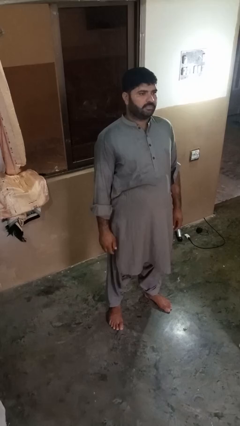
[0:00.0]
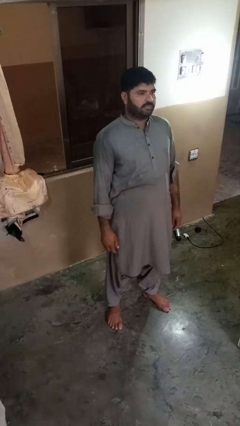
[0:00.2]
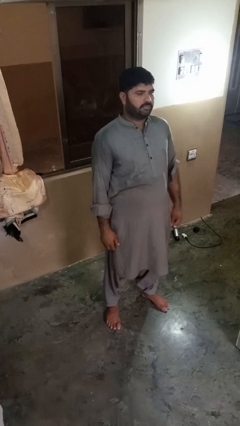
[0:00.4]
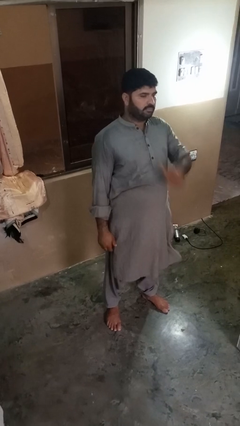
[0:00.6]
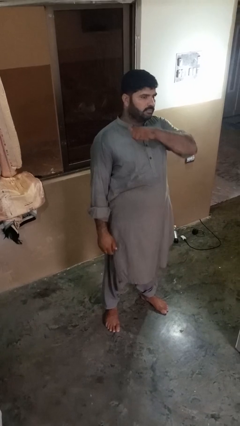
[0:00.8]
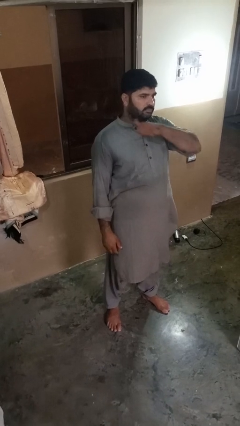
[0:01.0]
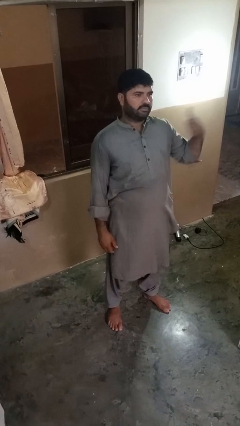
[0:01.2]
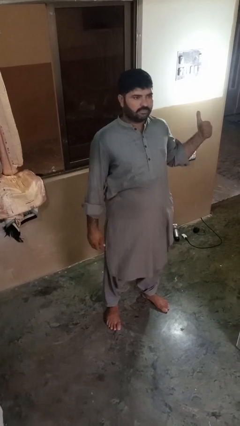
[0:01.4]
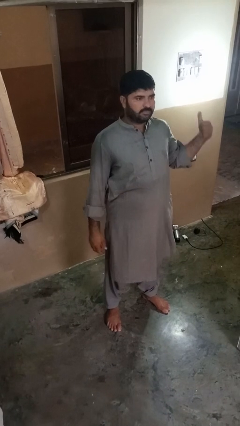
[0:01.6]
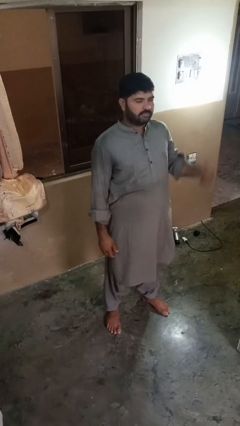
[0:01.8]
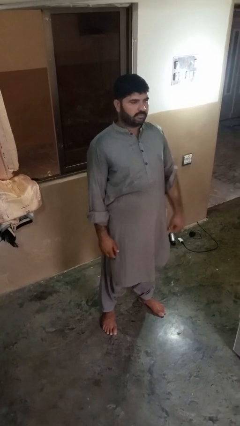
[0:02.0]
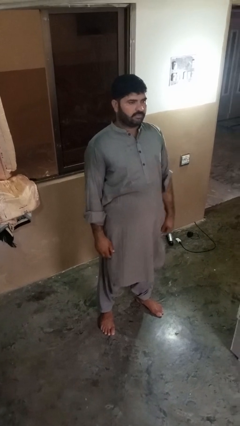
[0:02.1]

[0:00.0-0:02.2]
person gestures cut

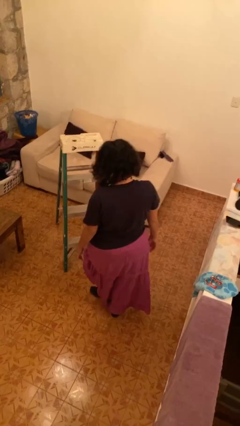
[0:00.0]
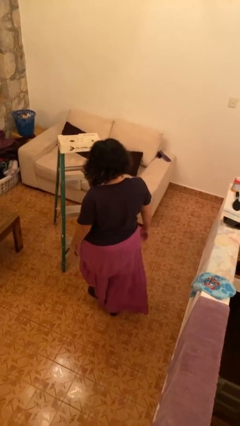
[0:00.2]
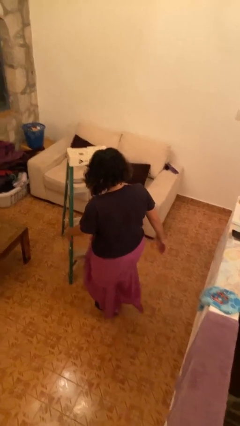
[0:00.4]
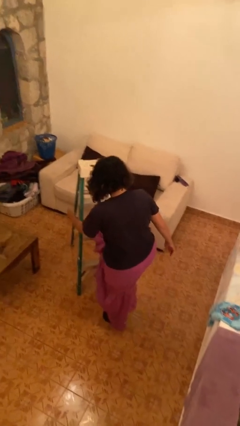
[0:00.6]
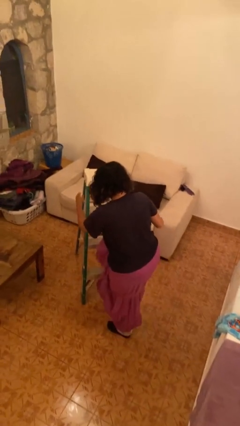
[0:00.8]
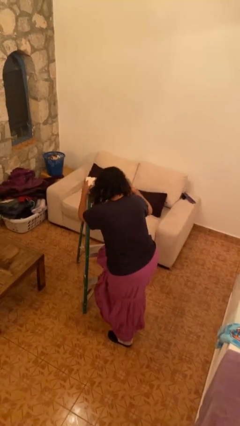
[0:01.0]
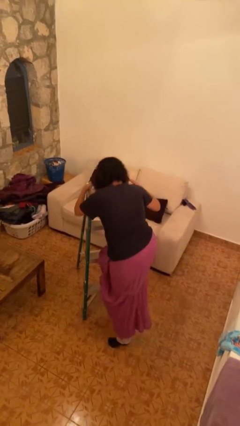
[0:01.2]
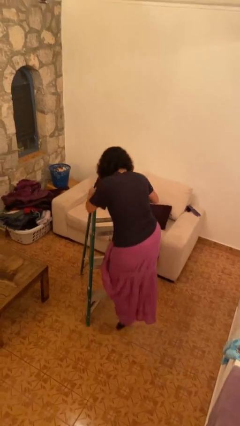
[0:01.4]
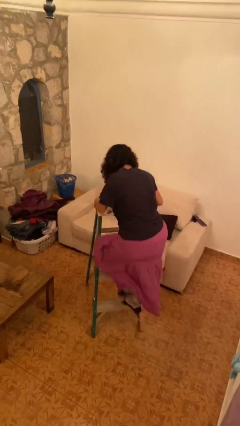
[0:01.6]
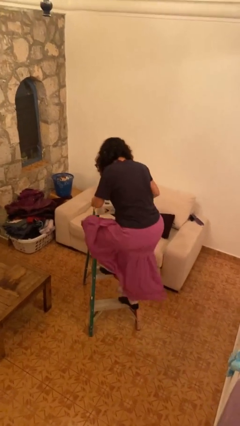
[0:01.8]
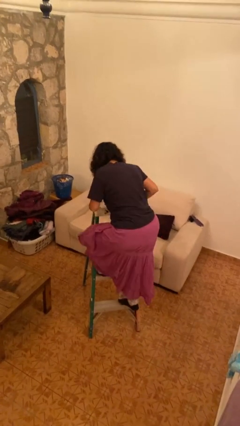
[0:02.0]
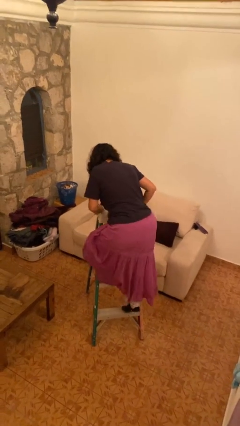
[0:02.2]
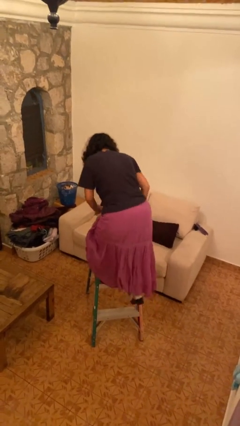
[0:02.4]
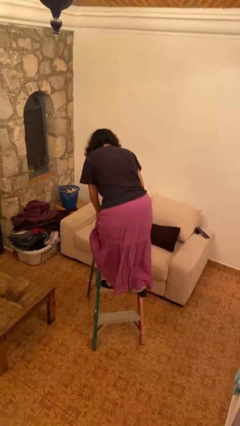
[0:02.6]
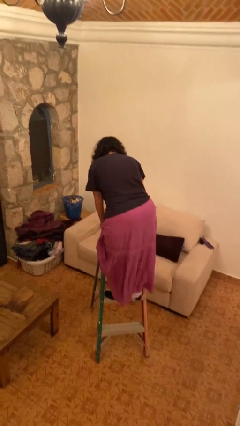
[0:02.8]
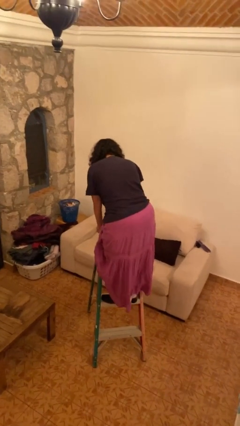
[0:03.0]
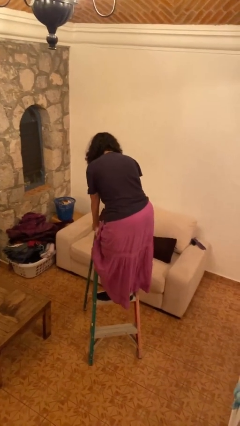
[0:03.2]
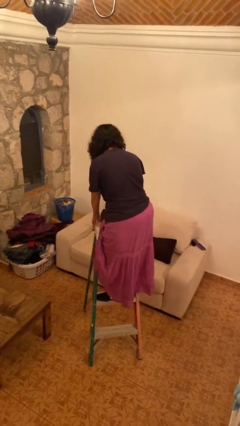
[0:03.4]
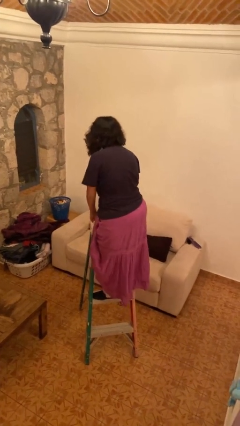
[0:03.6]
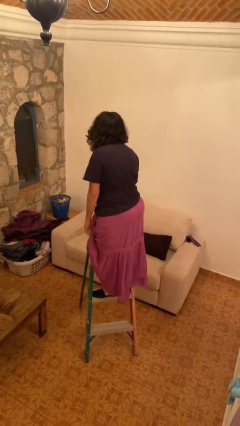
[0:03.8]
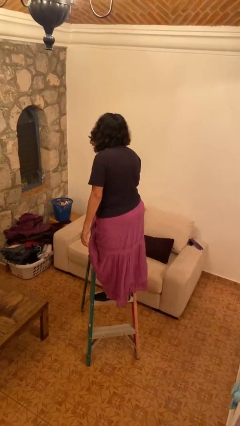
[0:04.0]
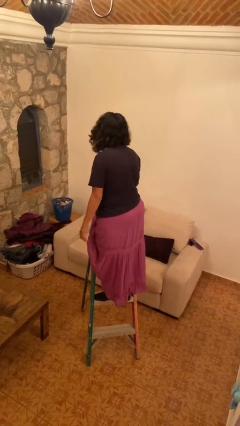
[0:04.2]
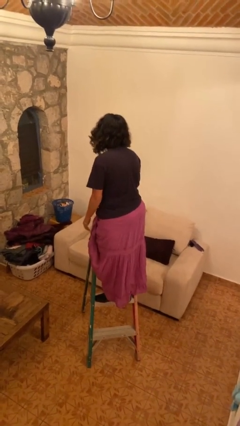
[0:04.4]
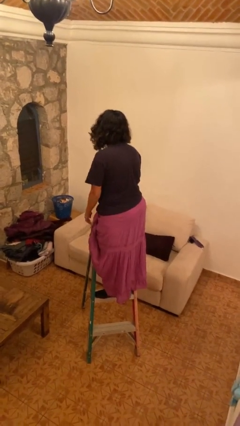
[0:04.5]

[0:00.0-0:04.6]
person climbs up ladder

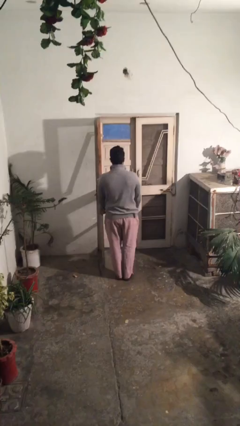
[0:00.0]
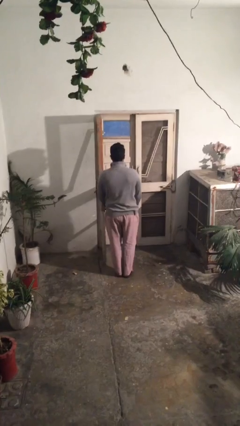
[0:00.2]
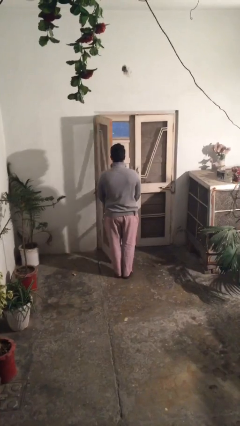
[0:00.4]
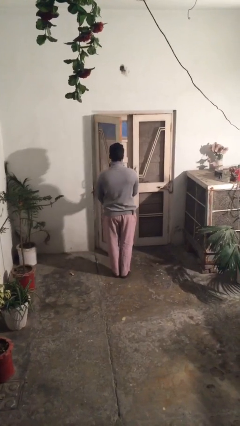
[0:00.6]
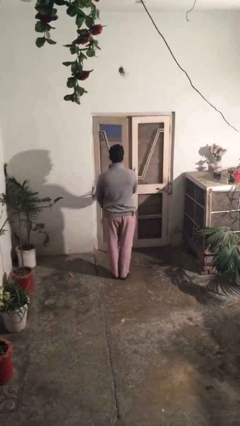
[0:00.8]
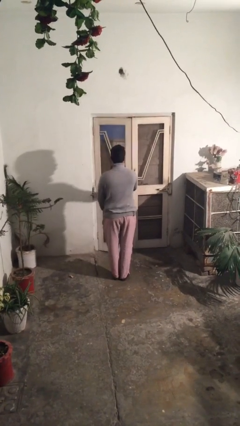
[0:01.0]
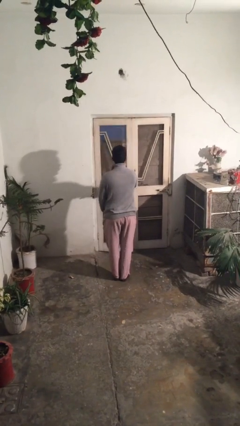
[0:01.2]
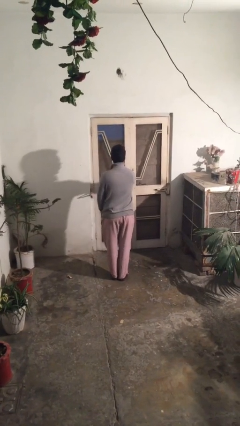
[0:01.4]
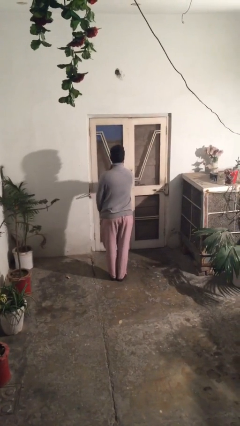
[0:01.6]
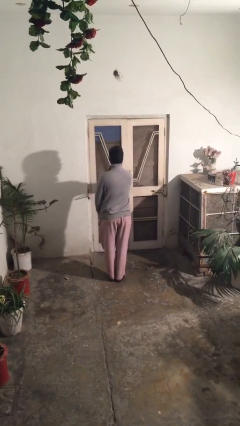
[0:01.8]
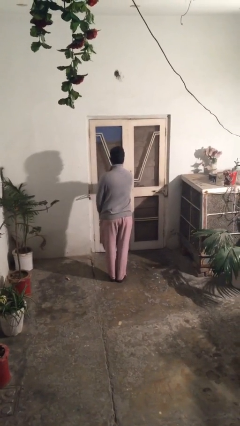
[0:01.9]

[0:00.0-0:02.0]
person closes facility door

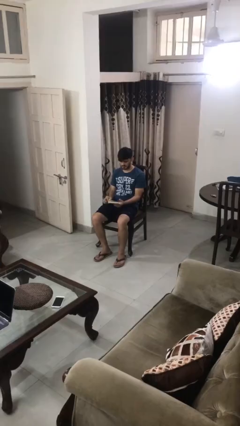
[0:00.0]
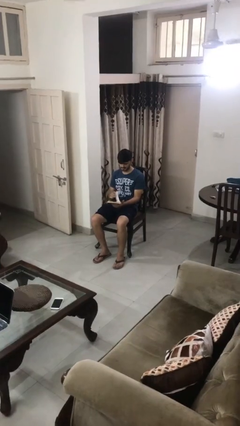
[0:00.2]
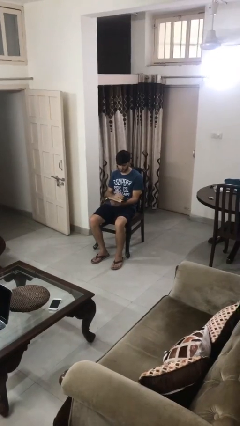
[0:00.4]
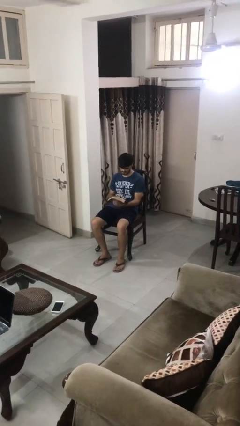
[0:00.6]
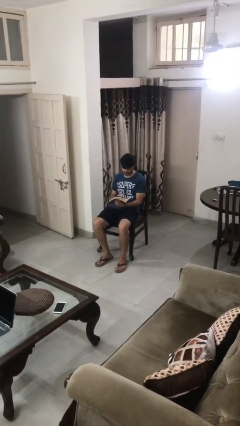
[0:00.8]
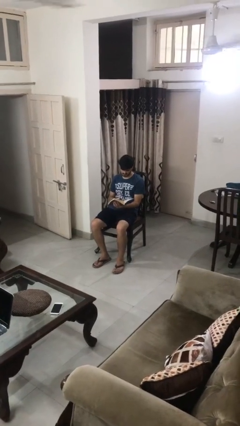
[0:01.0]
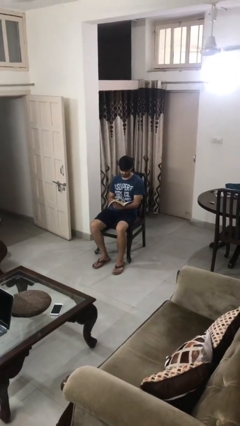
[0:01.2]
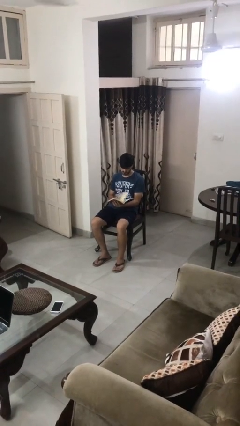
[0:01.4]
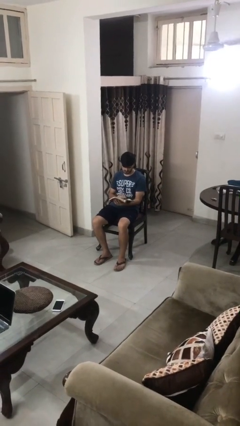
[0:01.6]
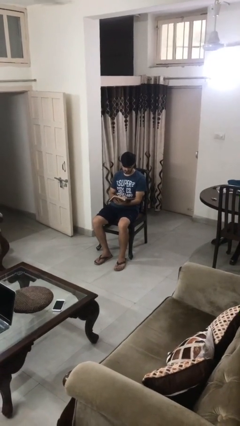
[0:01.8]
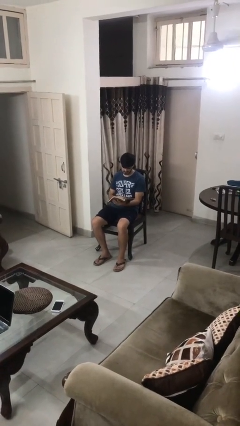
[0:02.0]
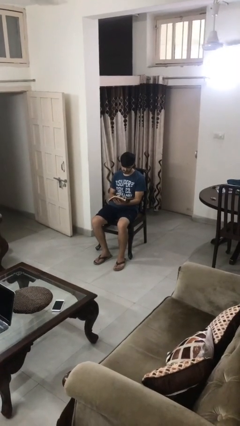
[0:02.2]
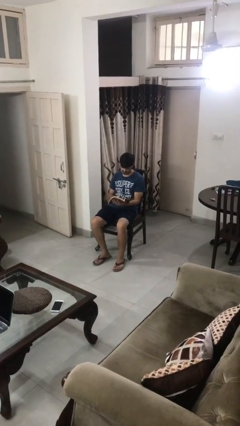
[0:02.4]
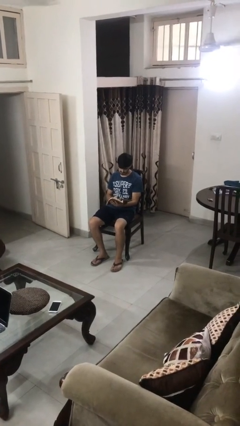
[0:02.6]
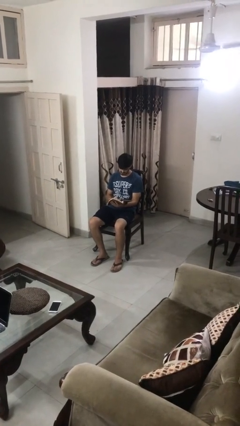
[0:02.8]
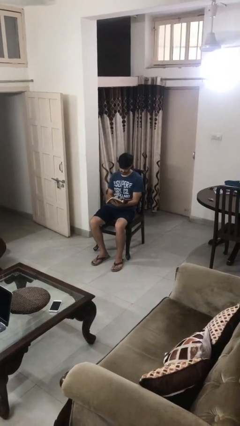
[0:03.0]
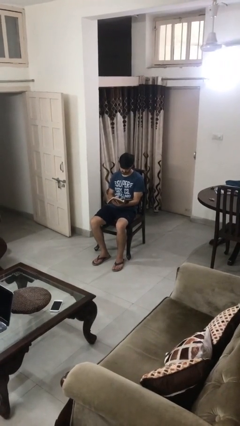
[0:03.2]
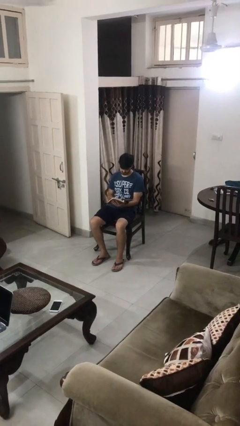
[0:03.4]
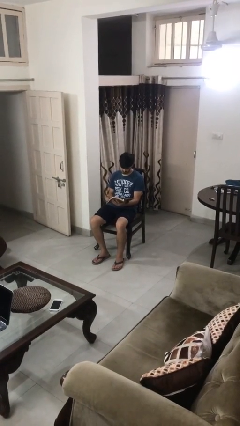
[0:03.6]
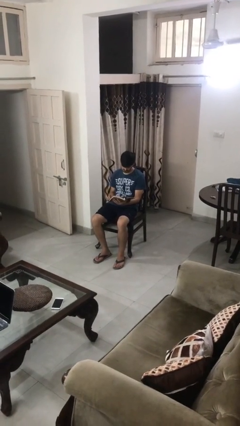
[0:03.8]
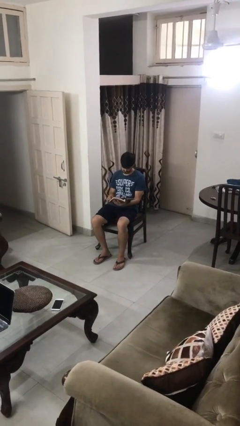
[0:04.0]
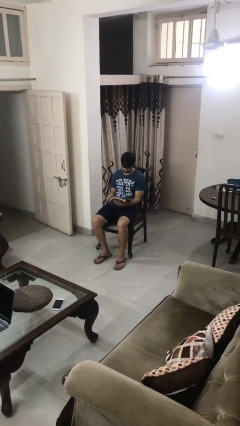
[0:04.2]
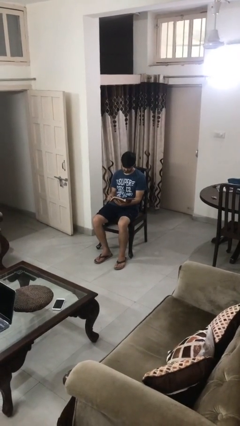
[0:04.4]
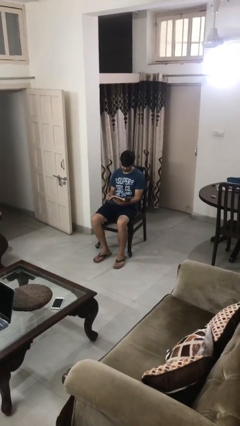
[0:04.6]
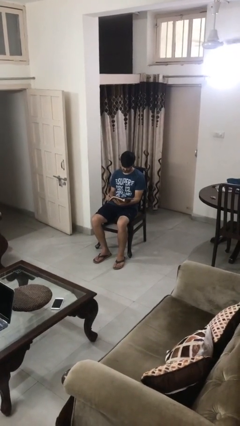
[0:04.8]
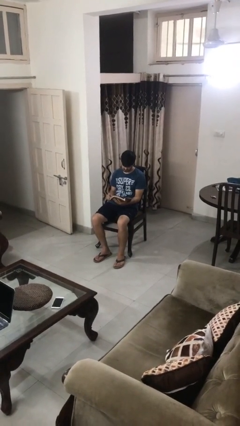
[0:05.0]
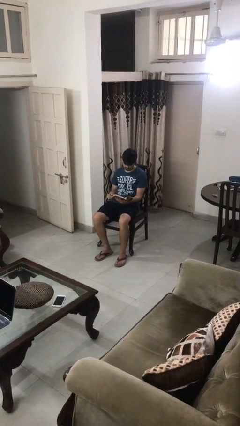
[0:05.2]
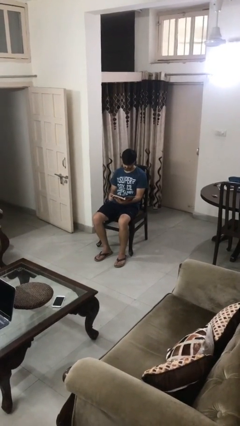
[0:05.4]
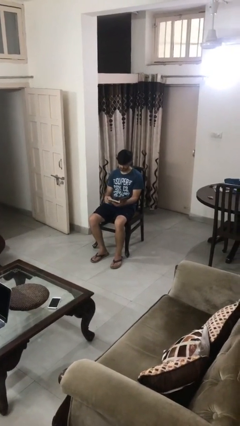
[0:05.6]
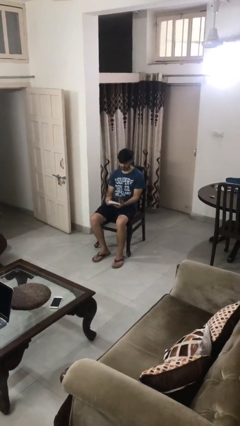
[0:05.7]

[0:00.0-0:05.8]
person reads book

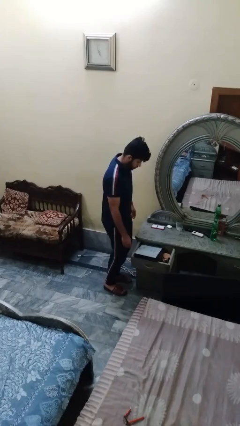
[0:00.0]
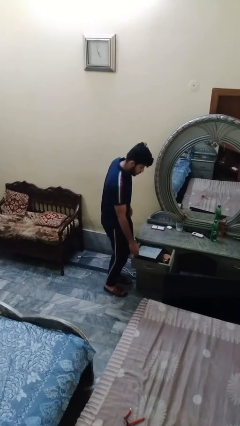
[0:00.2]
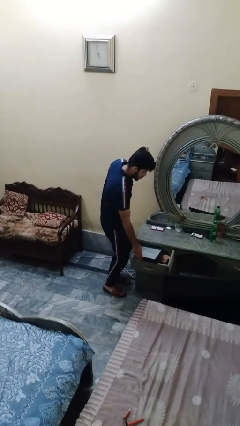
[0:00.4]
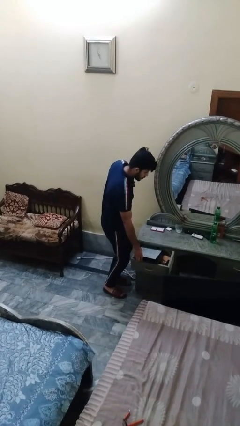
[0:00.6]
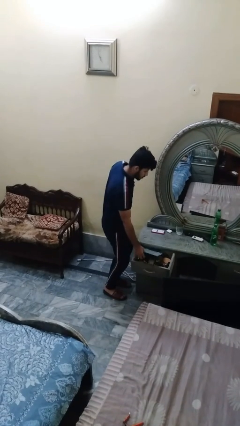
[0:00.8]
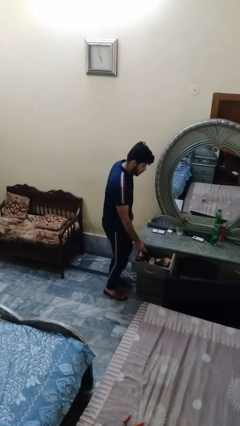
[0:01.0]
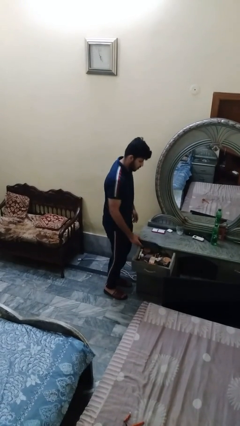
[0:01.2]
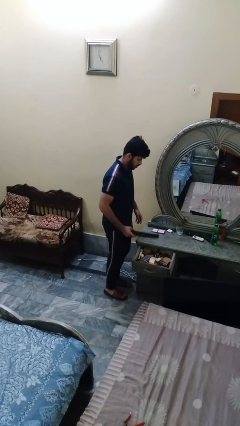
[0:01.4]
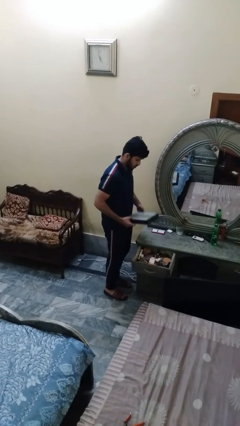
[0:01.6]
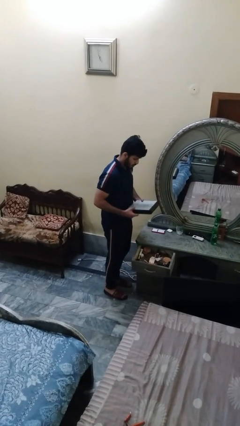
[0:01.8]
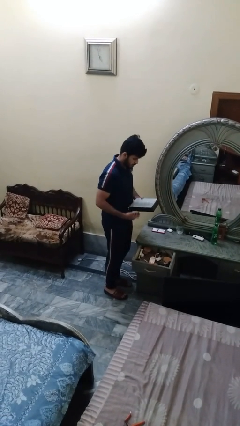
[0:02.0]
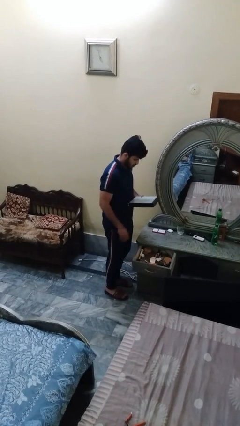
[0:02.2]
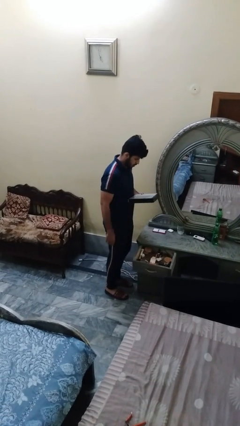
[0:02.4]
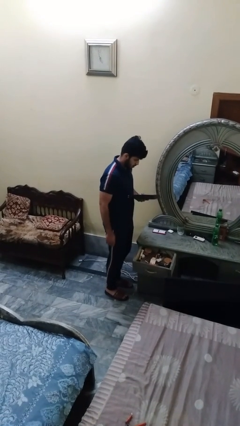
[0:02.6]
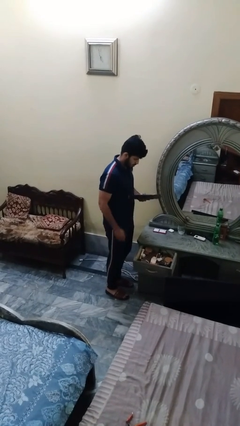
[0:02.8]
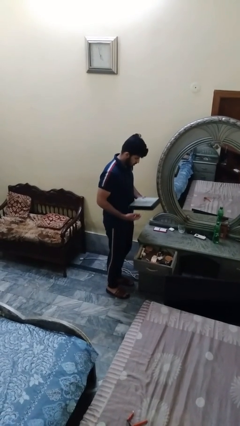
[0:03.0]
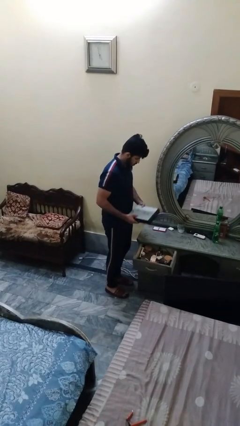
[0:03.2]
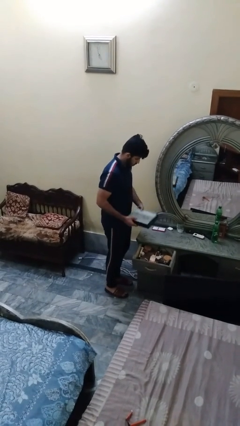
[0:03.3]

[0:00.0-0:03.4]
person picks up object from cabinet

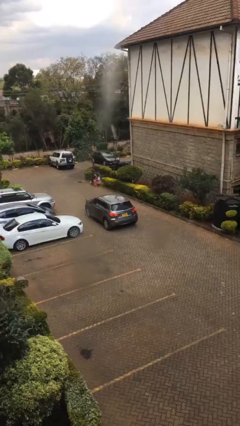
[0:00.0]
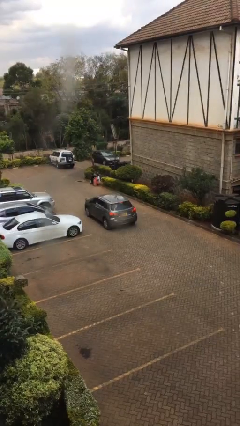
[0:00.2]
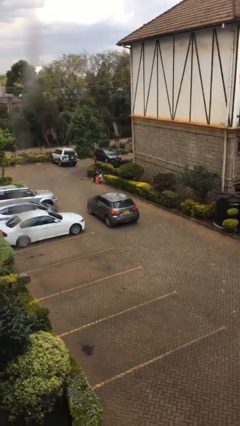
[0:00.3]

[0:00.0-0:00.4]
car picks up person
